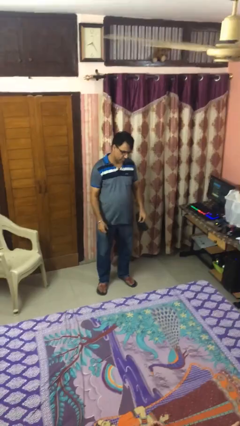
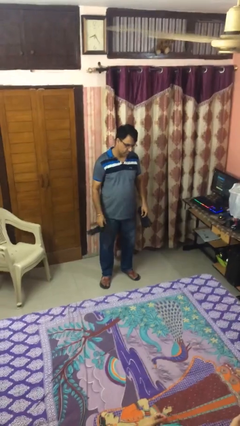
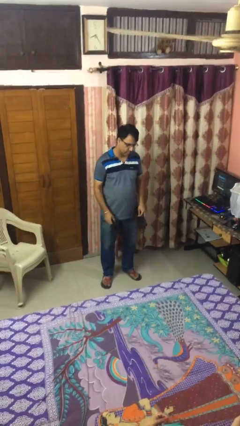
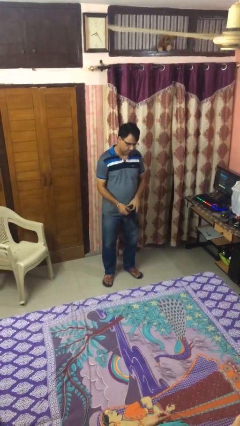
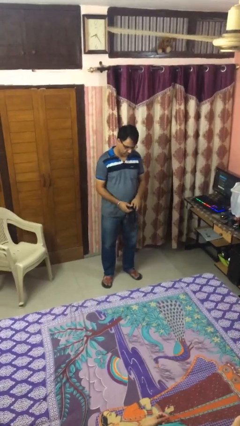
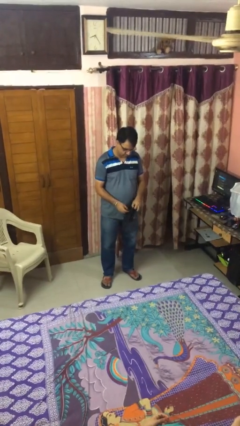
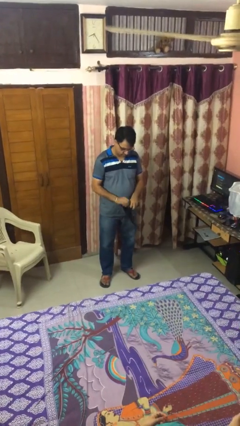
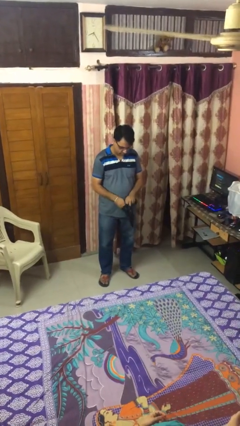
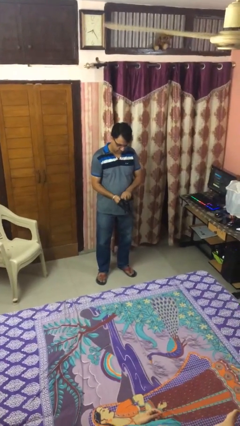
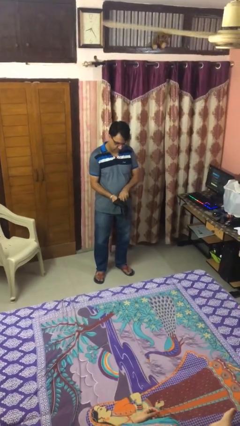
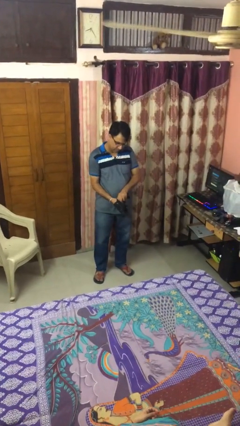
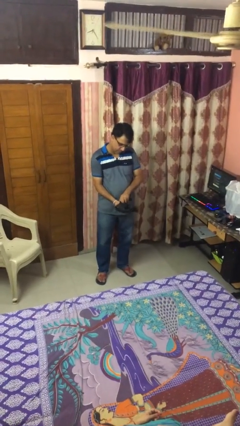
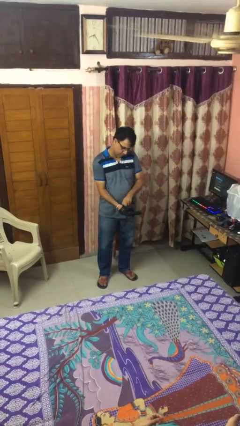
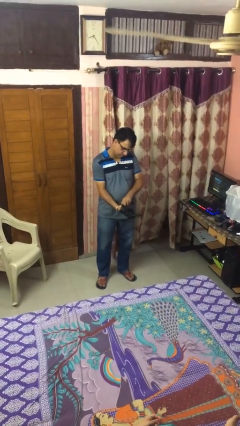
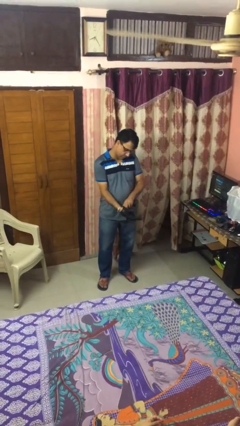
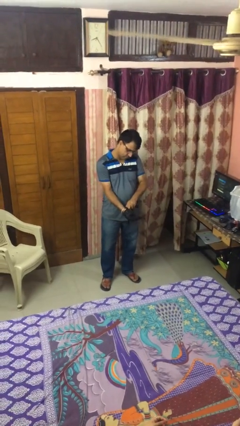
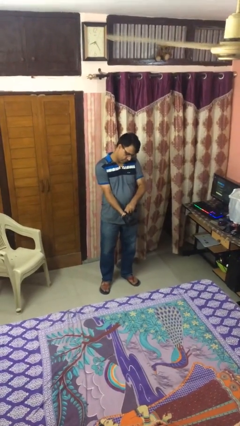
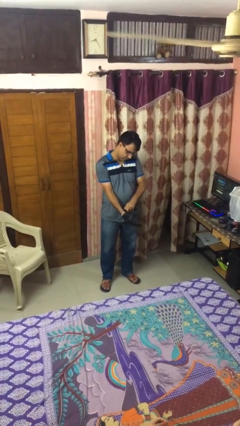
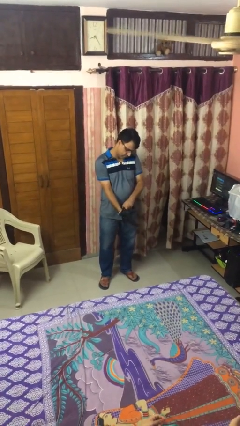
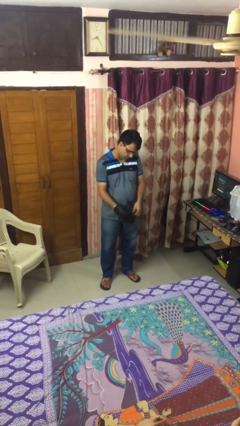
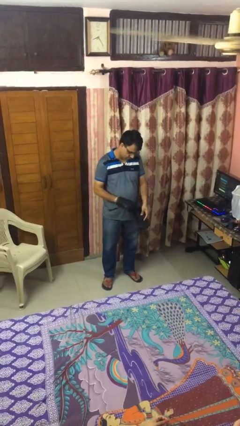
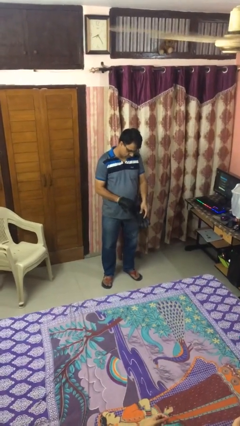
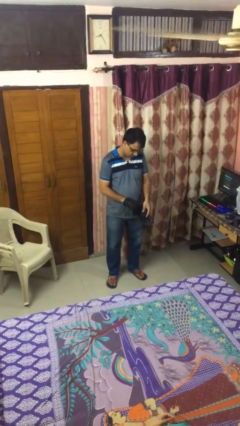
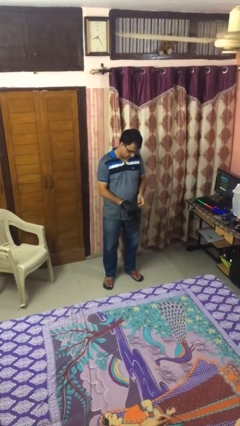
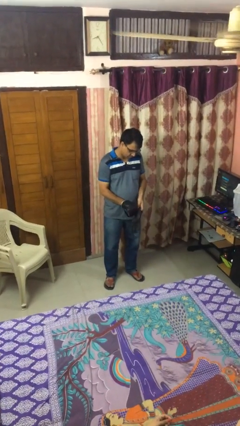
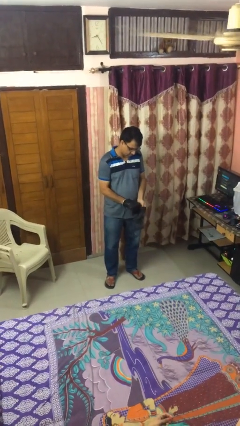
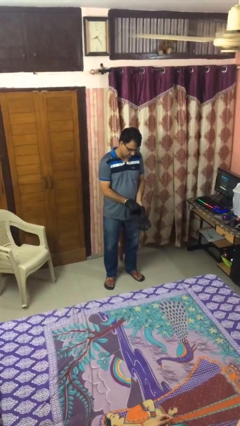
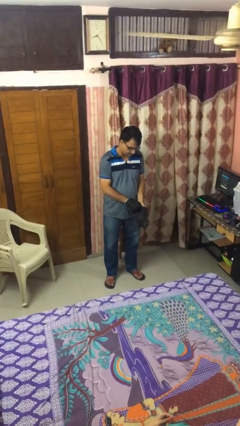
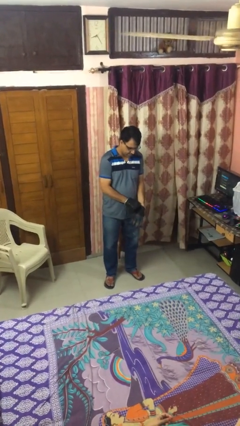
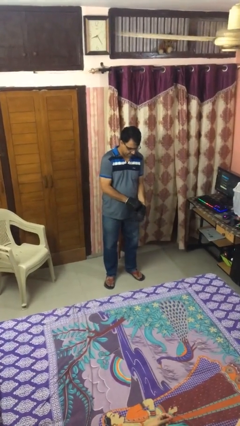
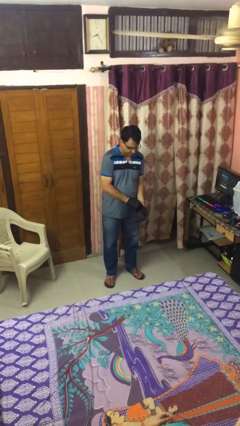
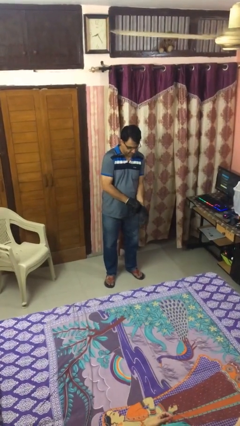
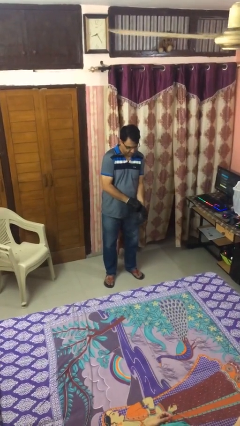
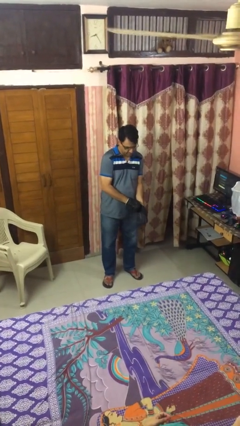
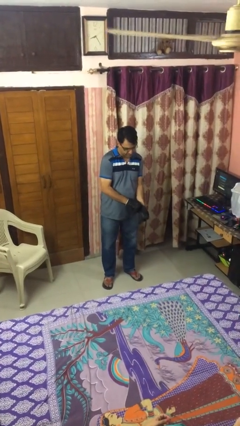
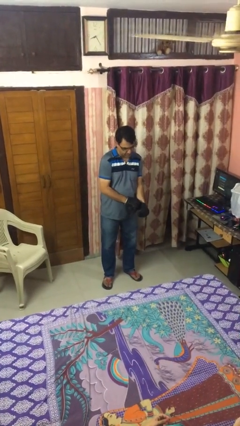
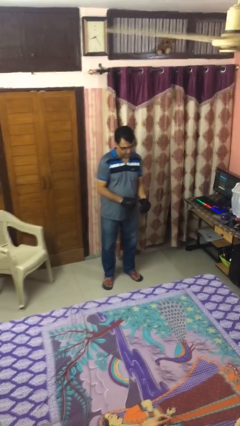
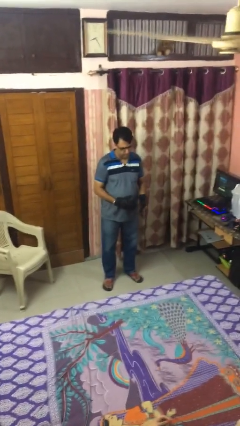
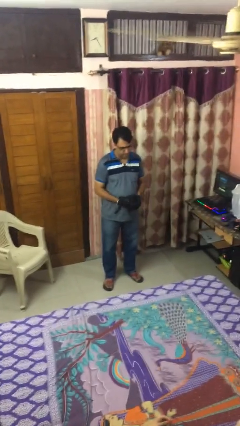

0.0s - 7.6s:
person puts on gloves

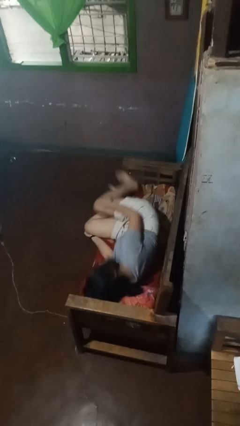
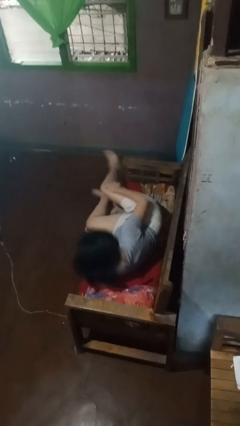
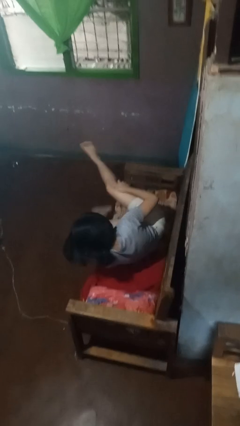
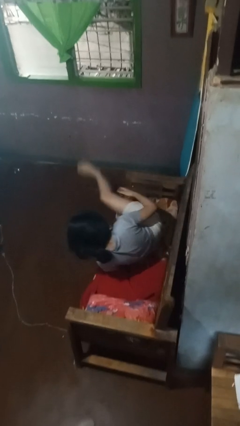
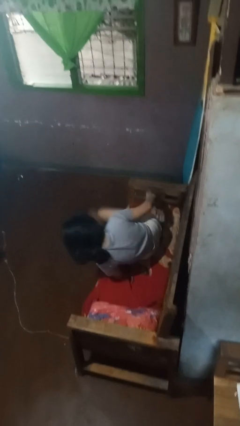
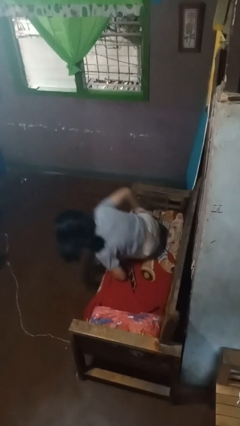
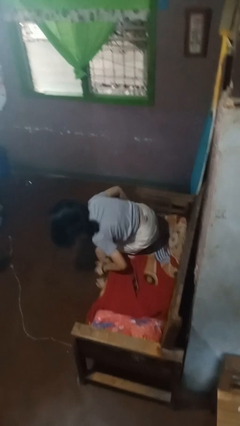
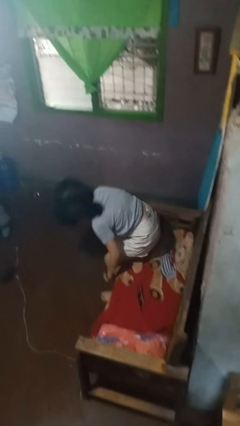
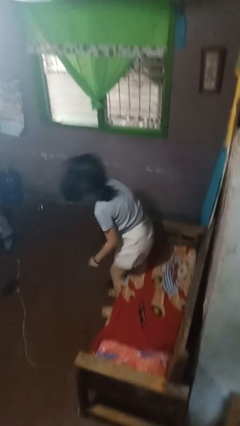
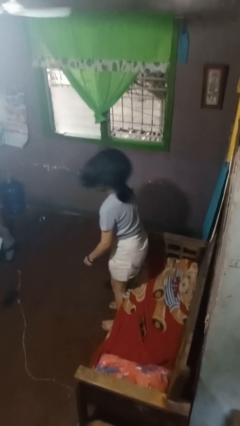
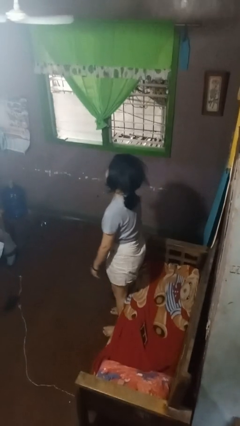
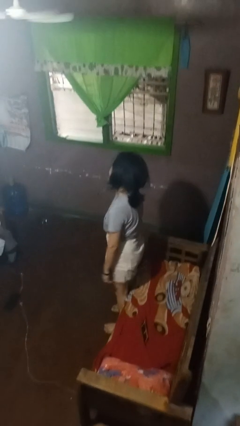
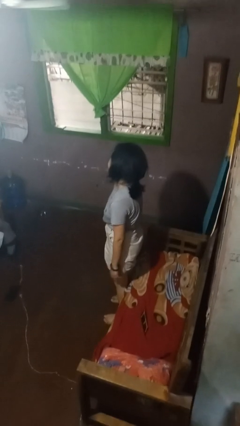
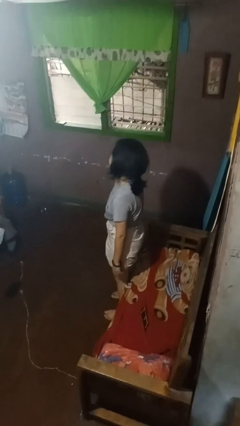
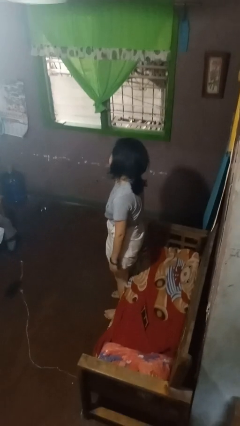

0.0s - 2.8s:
person stands up

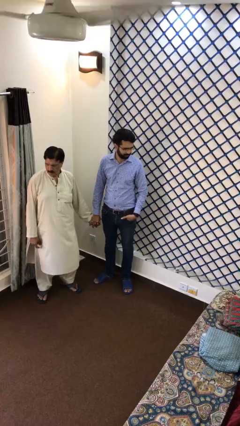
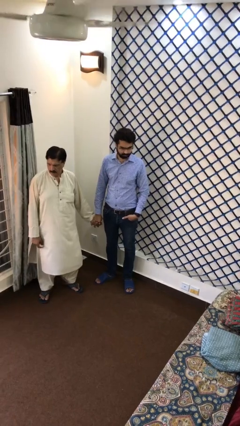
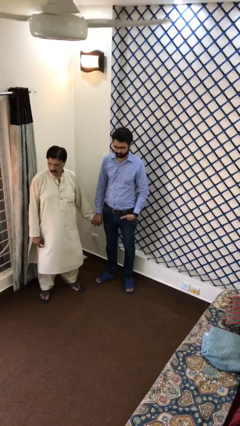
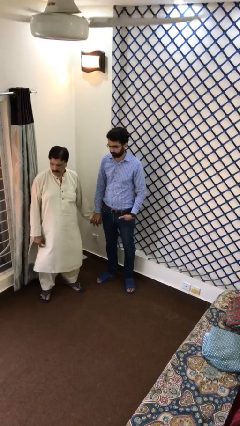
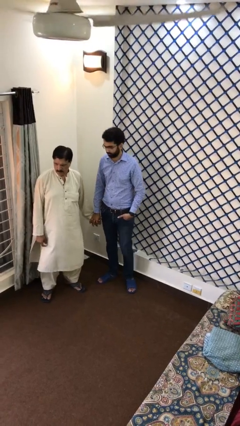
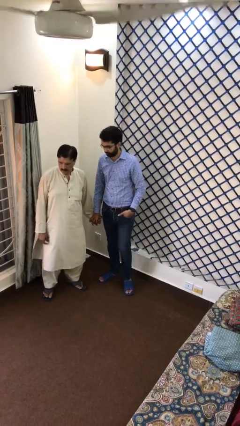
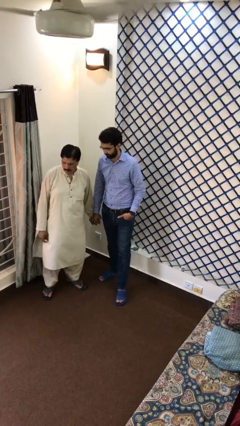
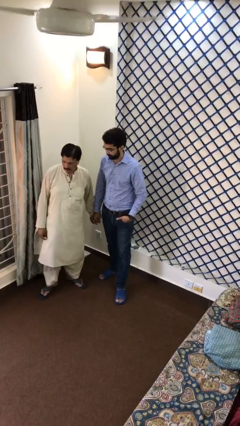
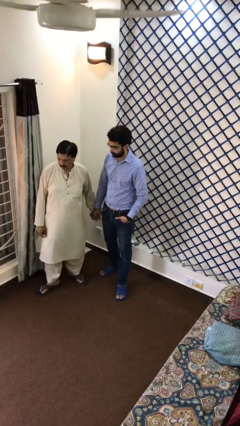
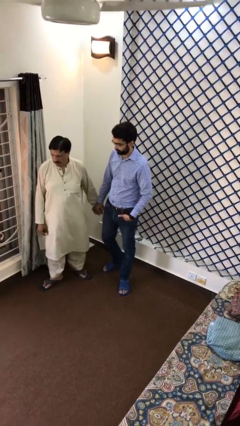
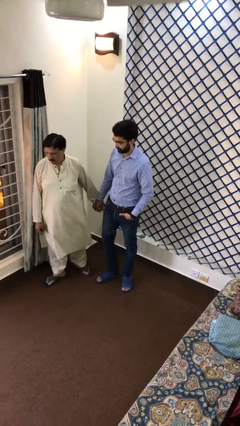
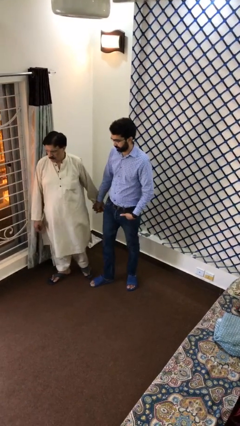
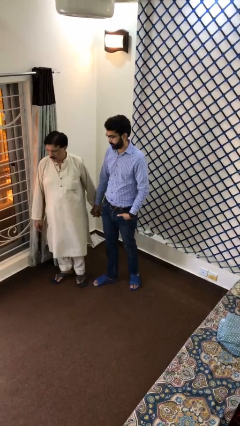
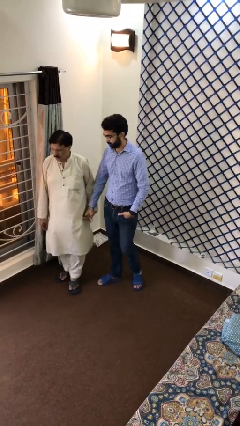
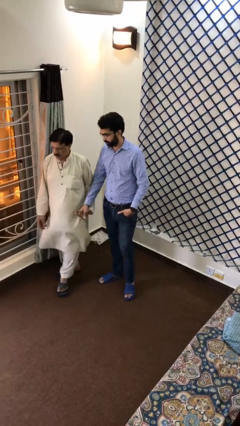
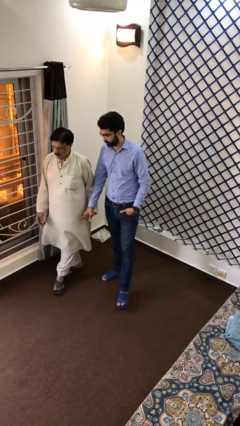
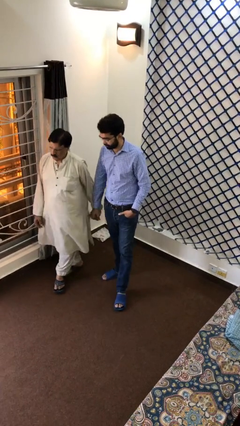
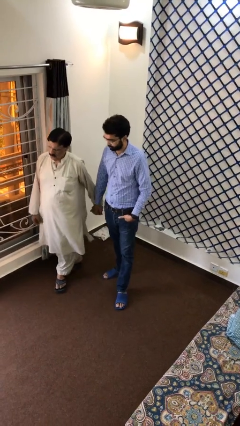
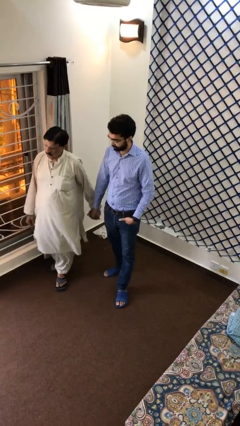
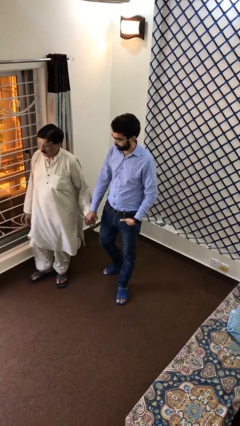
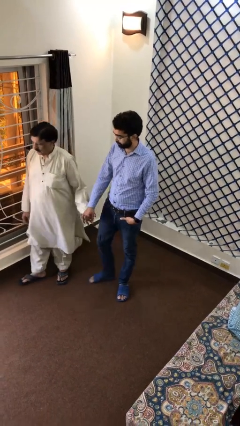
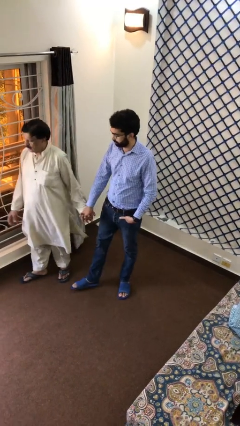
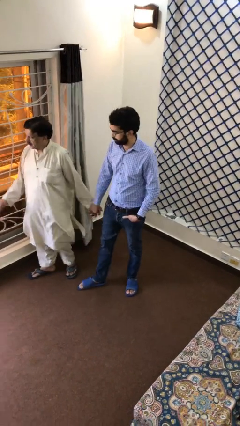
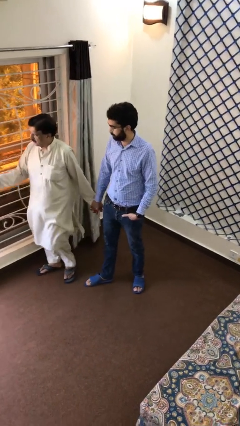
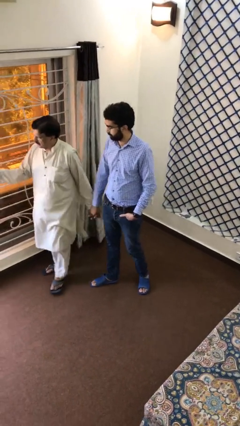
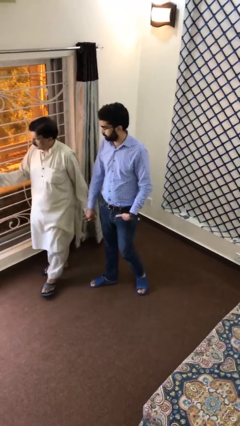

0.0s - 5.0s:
person holds hand

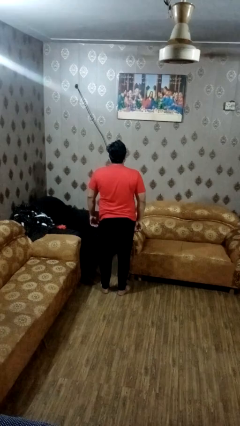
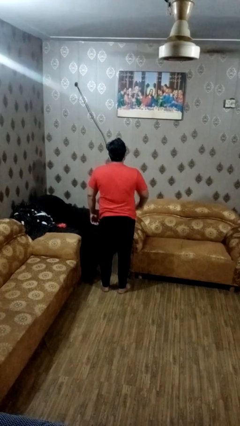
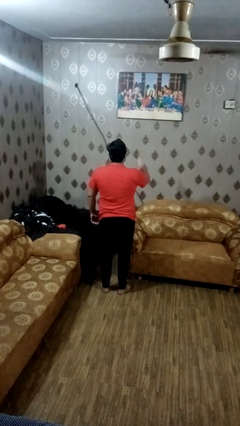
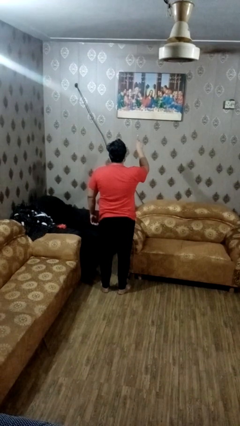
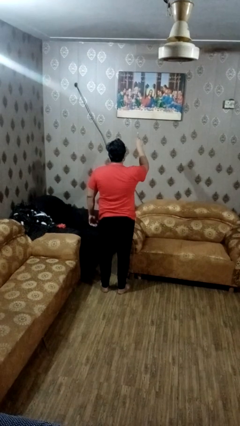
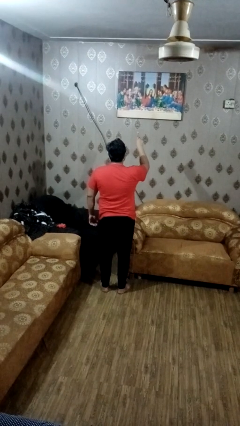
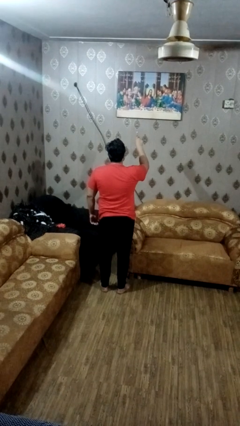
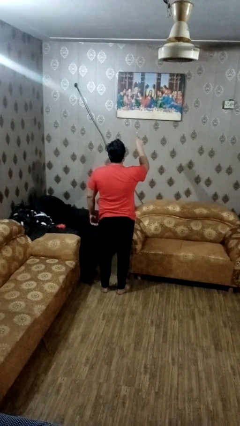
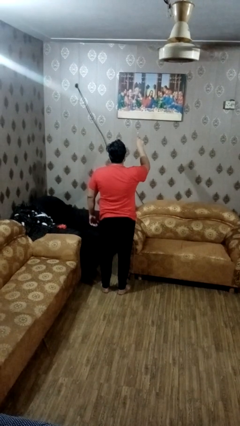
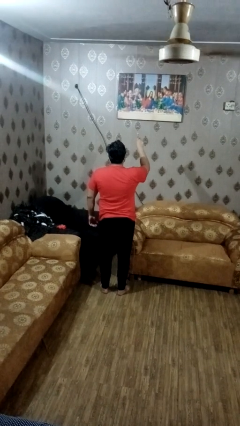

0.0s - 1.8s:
person gestures number one

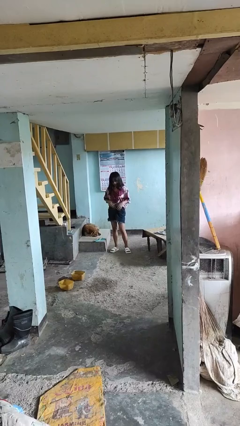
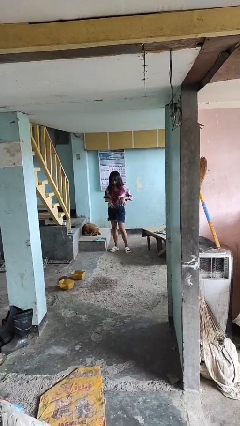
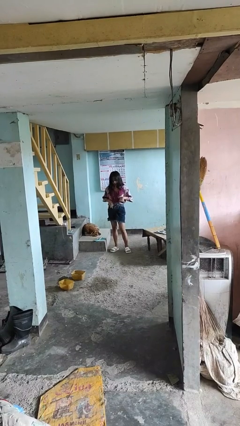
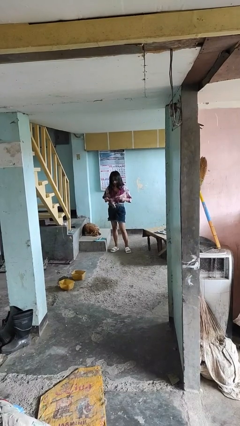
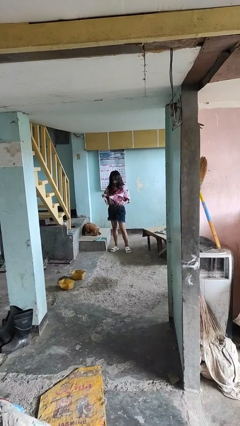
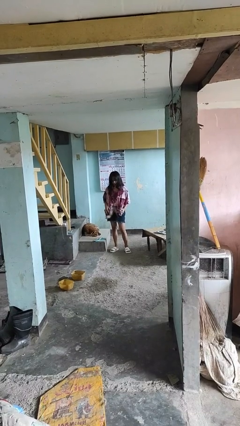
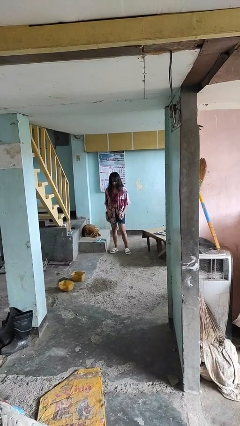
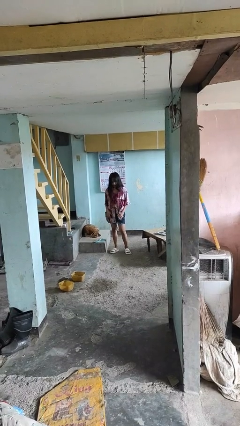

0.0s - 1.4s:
person untucks shirt
